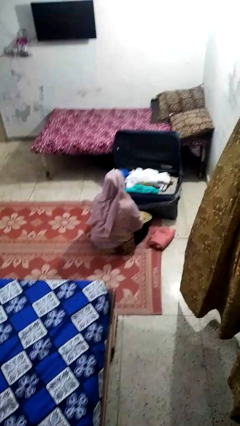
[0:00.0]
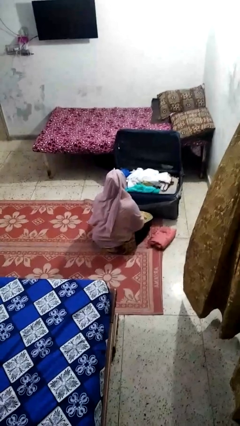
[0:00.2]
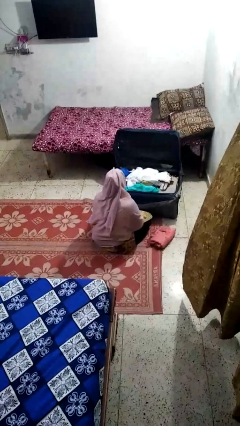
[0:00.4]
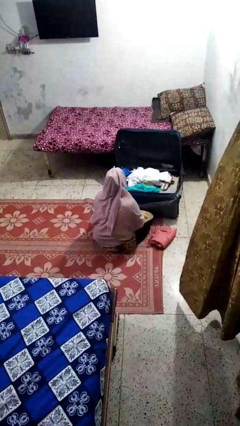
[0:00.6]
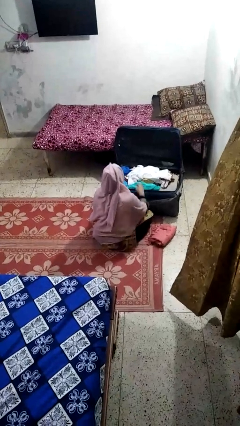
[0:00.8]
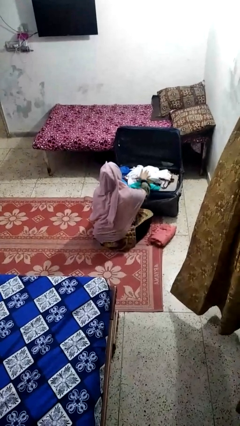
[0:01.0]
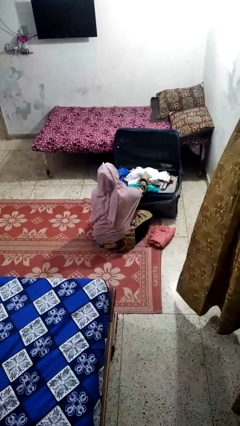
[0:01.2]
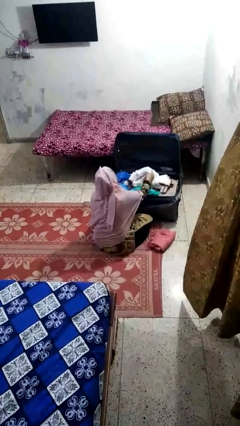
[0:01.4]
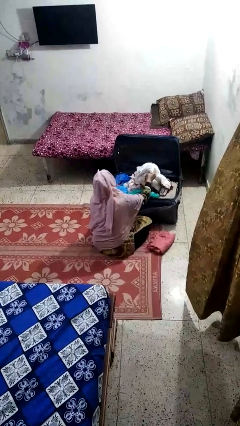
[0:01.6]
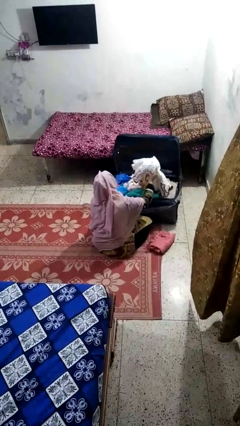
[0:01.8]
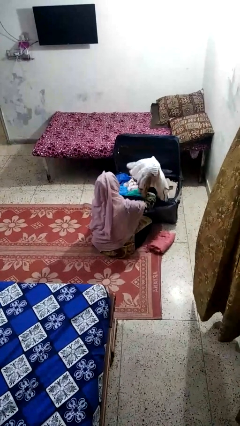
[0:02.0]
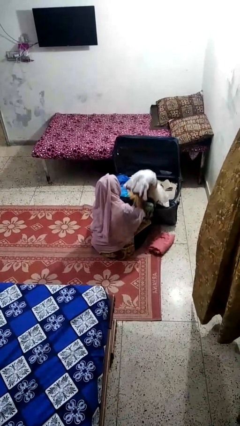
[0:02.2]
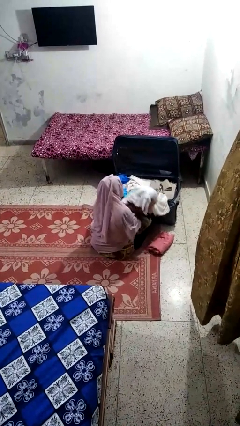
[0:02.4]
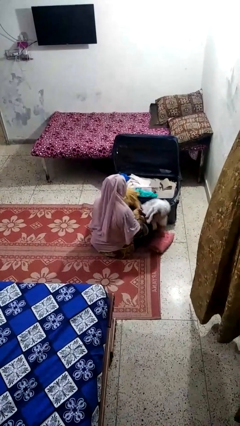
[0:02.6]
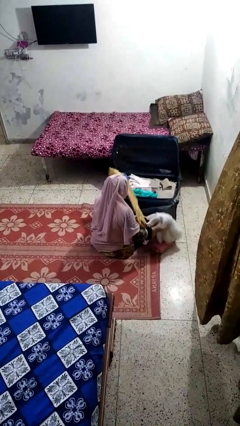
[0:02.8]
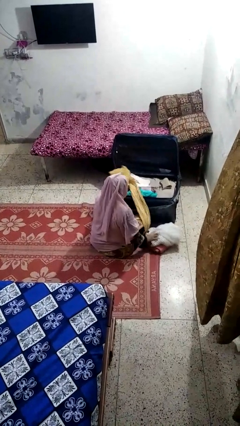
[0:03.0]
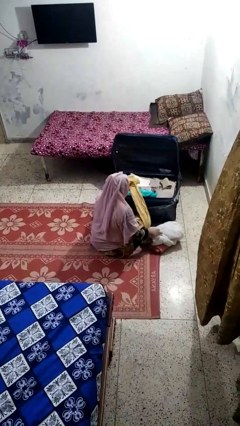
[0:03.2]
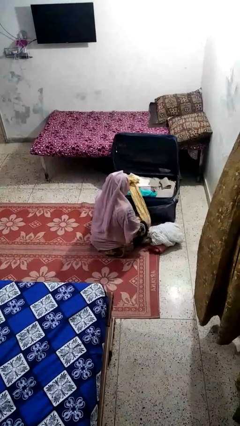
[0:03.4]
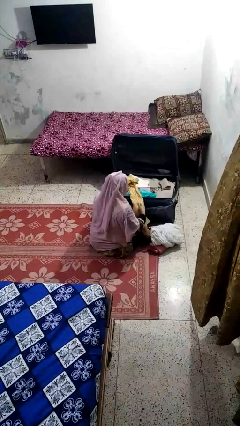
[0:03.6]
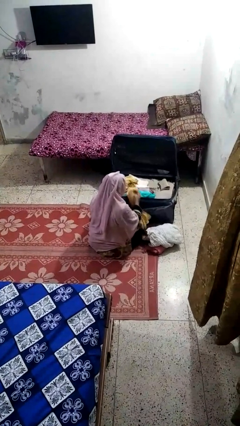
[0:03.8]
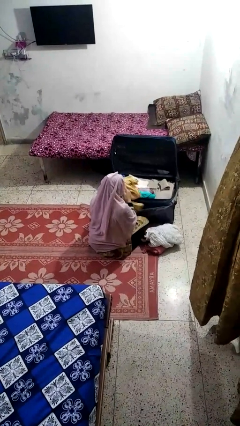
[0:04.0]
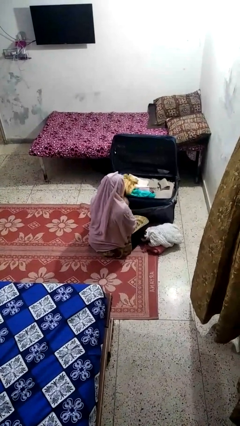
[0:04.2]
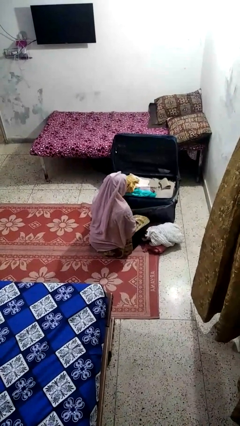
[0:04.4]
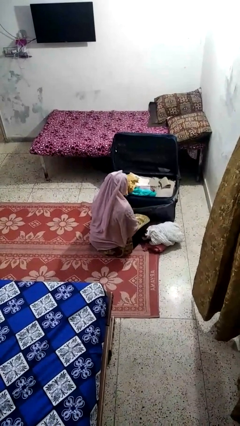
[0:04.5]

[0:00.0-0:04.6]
person unloads clothes from suitcase

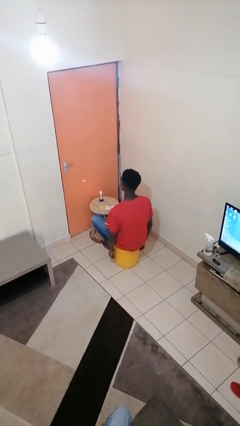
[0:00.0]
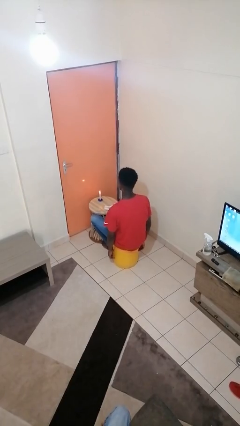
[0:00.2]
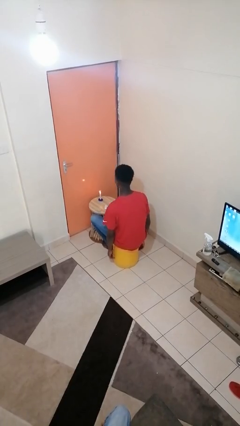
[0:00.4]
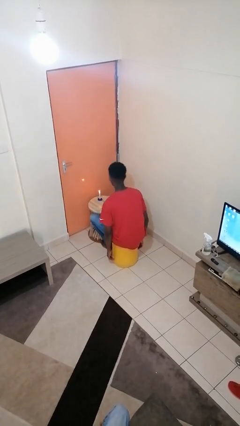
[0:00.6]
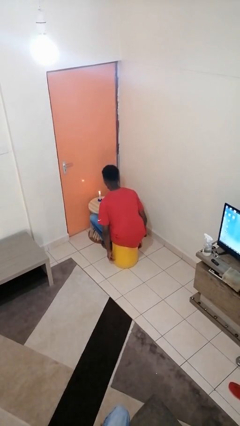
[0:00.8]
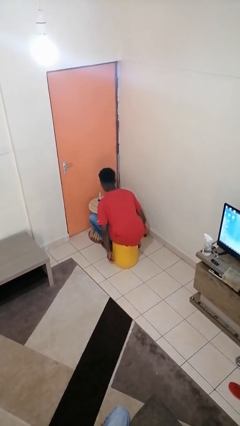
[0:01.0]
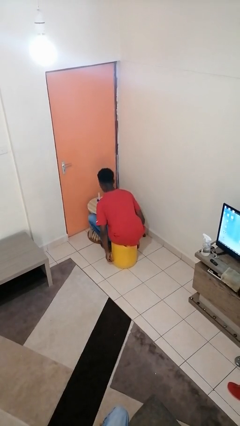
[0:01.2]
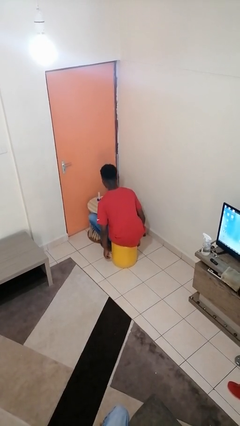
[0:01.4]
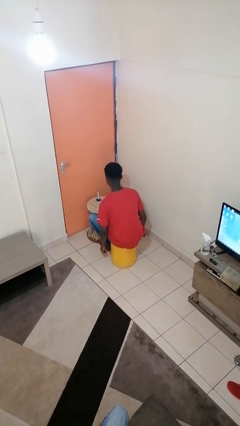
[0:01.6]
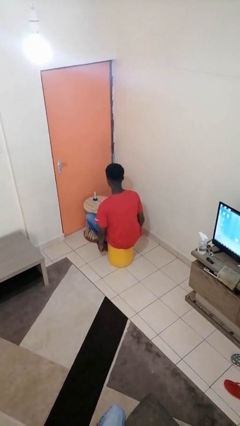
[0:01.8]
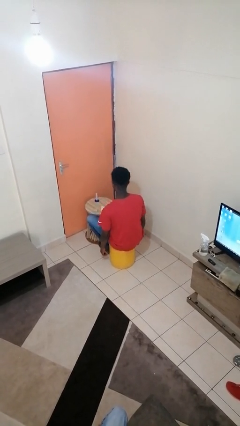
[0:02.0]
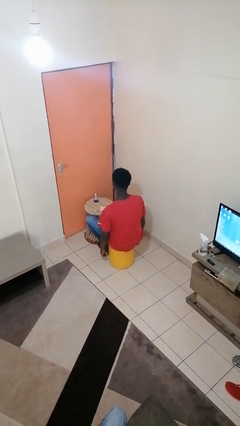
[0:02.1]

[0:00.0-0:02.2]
person extinguishes candle

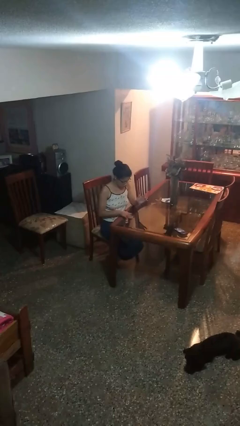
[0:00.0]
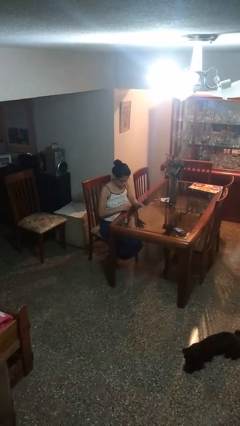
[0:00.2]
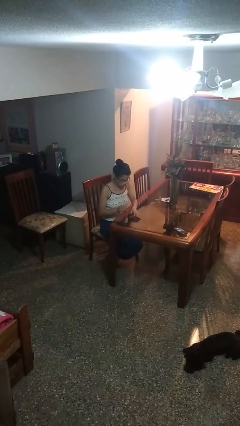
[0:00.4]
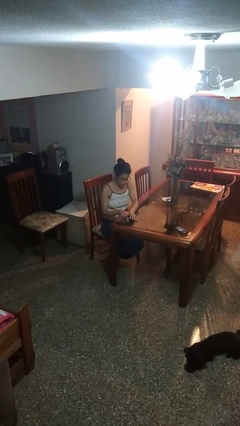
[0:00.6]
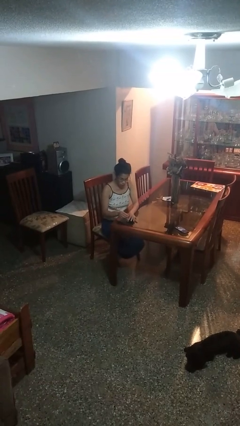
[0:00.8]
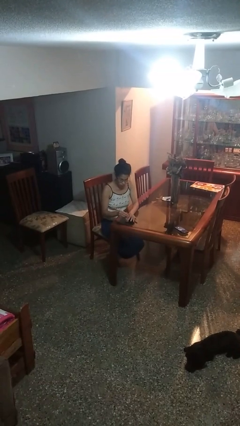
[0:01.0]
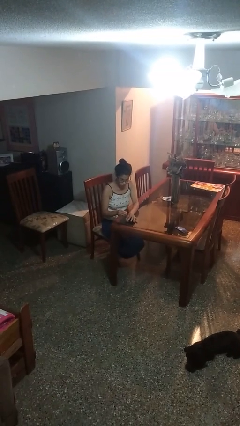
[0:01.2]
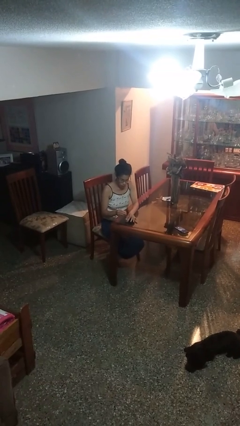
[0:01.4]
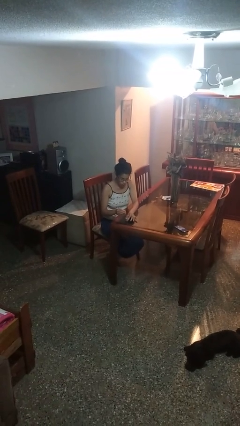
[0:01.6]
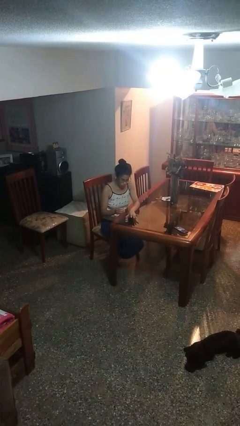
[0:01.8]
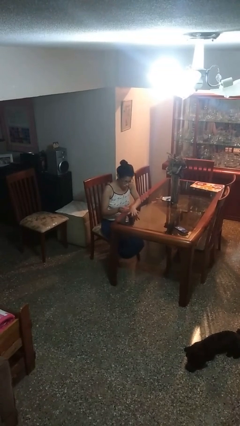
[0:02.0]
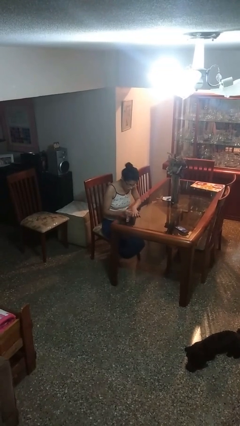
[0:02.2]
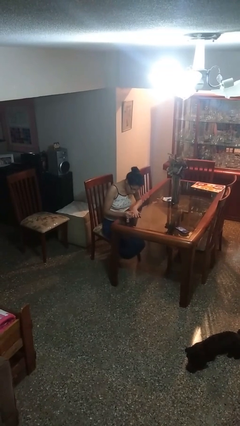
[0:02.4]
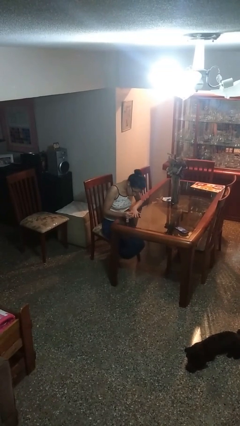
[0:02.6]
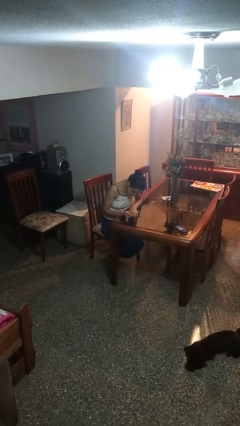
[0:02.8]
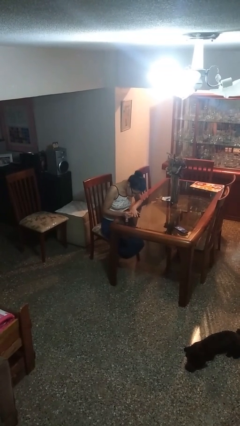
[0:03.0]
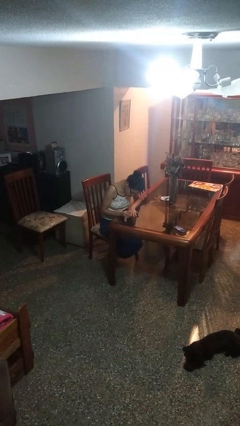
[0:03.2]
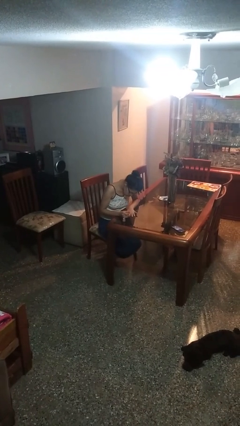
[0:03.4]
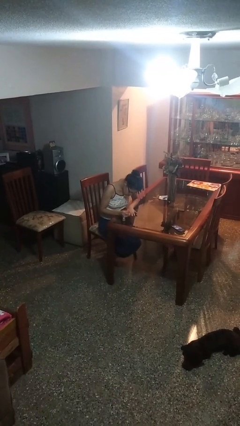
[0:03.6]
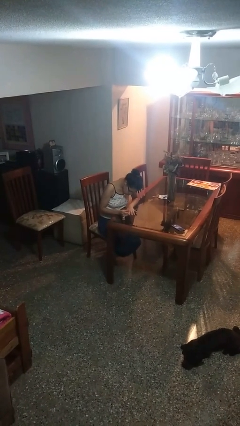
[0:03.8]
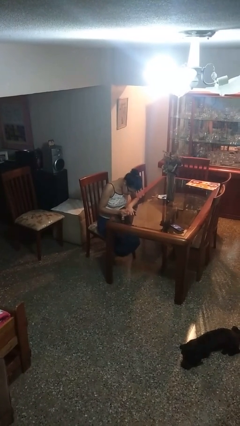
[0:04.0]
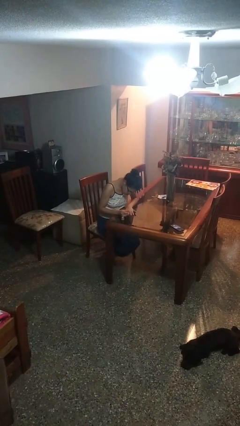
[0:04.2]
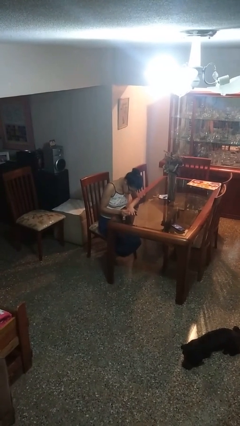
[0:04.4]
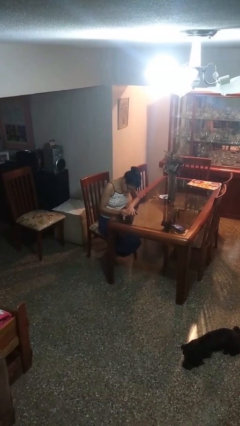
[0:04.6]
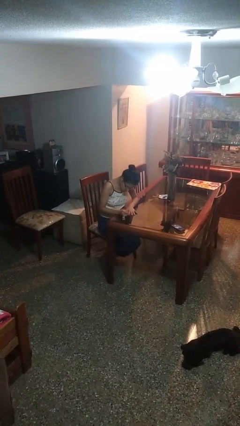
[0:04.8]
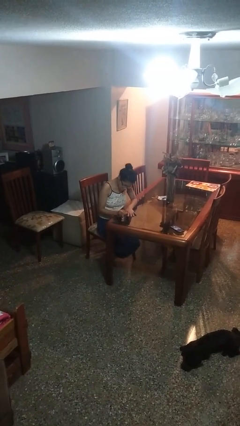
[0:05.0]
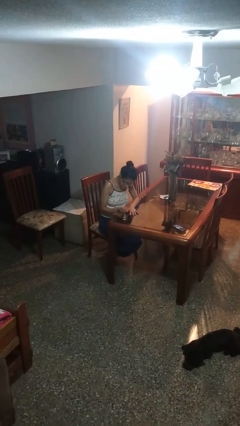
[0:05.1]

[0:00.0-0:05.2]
person paints fingernails

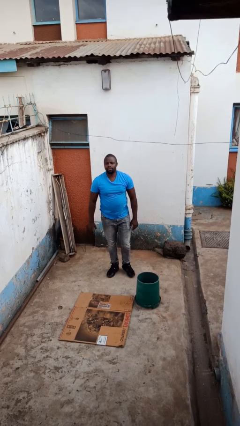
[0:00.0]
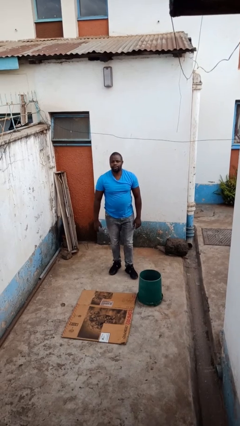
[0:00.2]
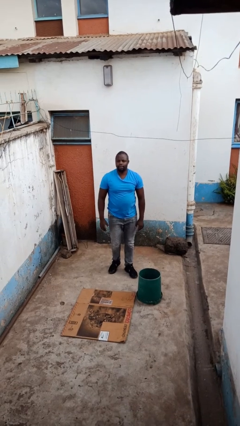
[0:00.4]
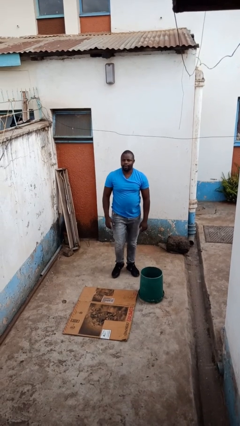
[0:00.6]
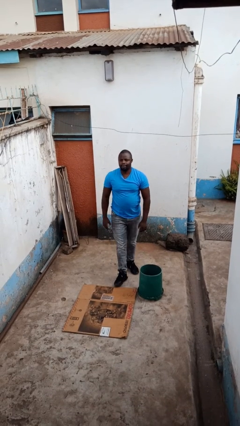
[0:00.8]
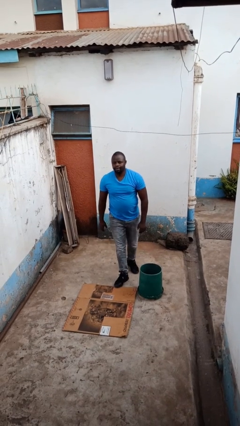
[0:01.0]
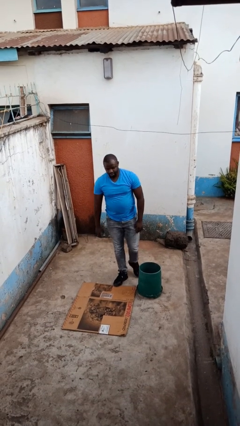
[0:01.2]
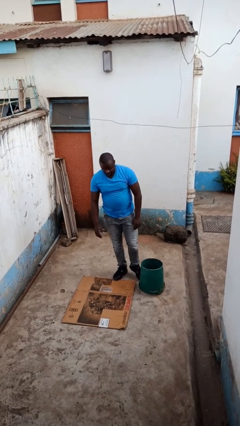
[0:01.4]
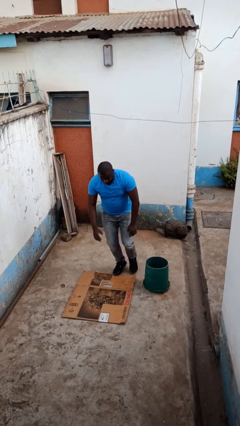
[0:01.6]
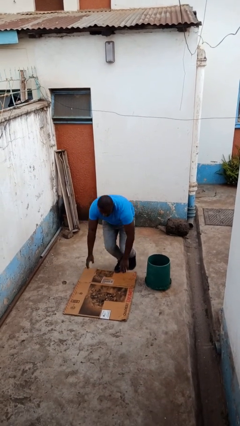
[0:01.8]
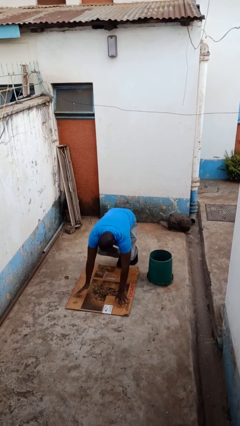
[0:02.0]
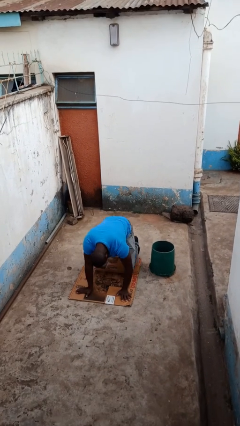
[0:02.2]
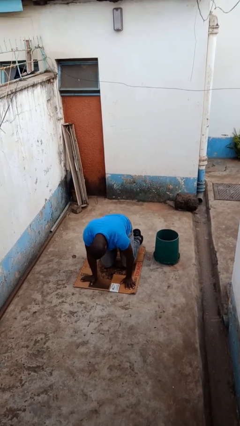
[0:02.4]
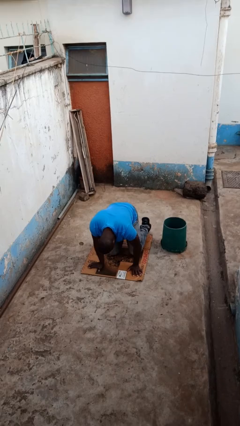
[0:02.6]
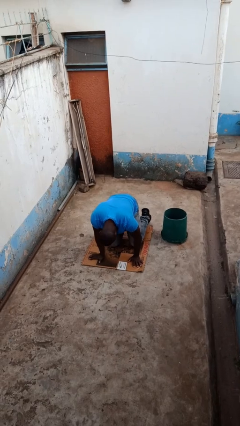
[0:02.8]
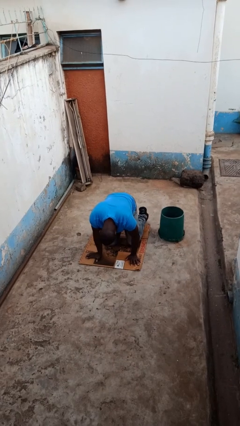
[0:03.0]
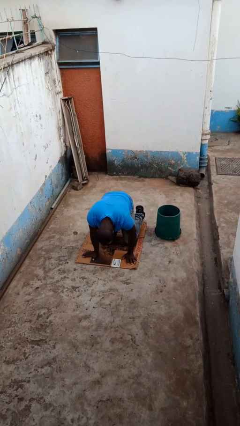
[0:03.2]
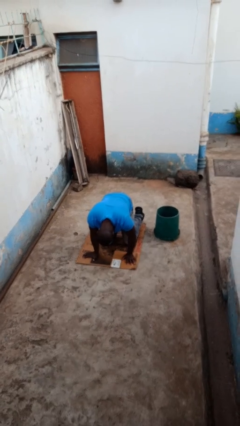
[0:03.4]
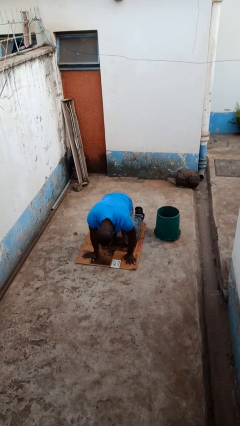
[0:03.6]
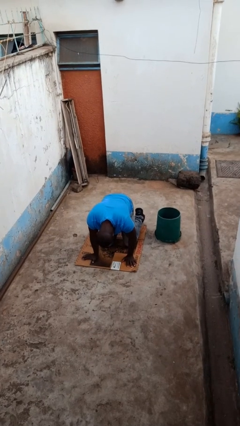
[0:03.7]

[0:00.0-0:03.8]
person trips on object on floor

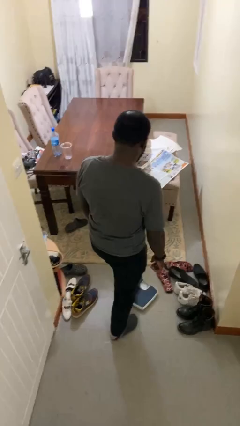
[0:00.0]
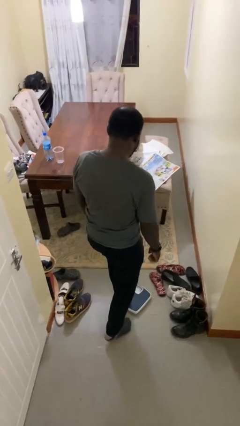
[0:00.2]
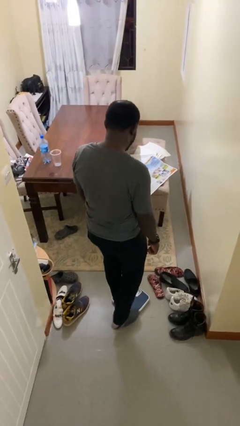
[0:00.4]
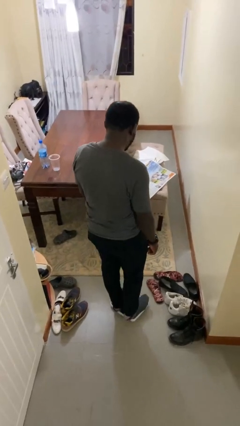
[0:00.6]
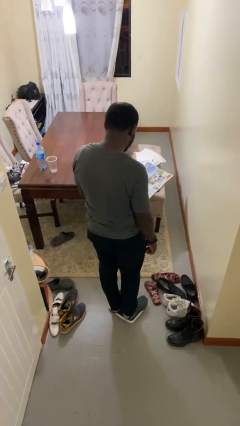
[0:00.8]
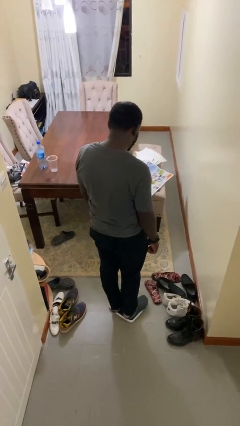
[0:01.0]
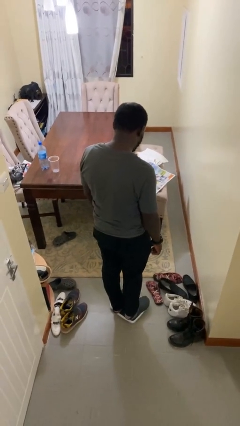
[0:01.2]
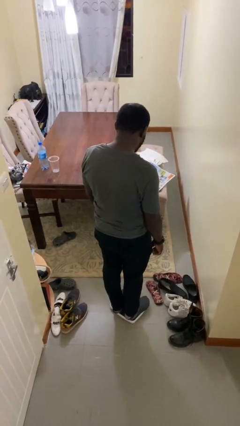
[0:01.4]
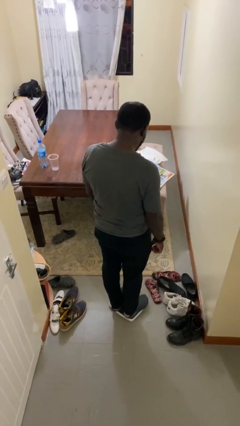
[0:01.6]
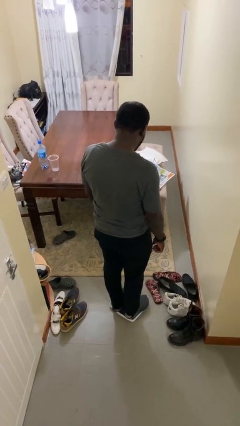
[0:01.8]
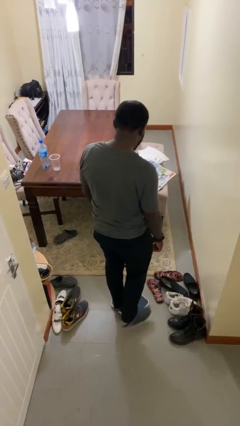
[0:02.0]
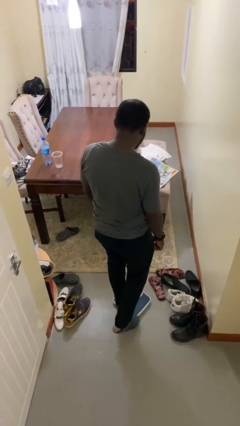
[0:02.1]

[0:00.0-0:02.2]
person uses bodyweight scale
